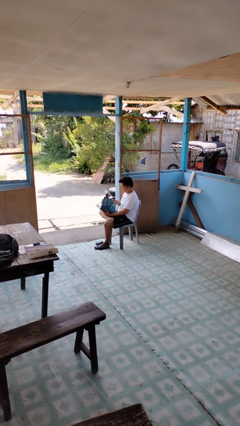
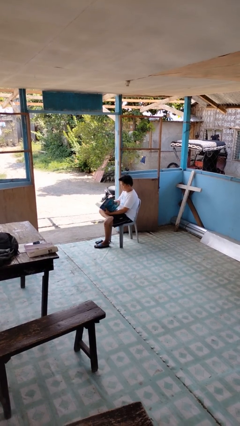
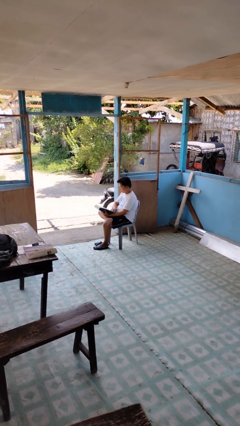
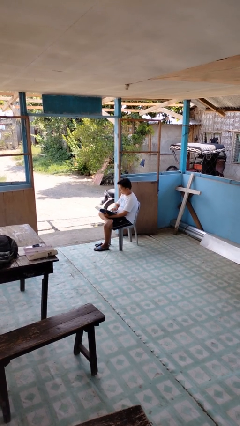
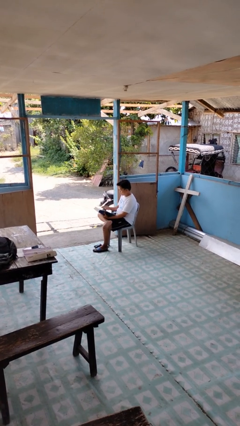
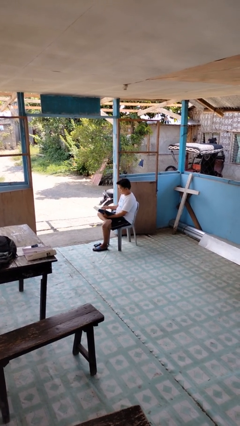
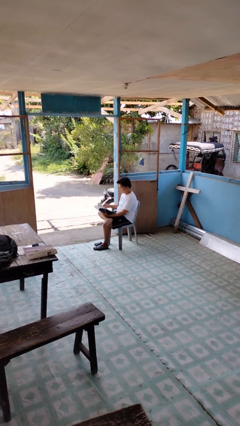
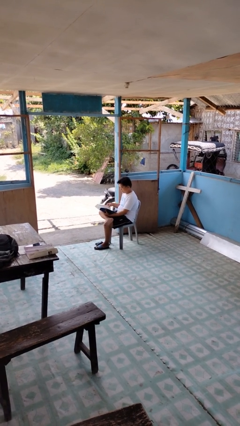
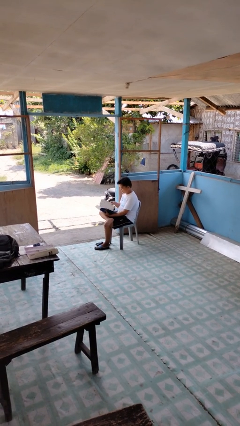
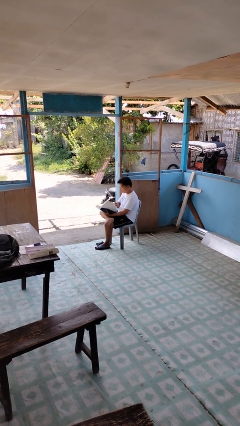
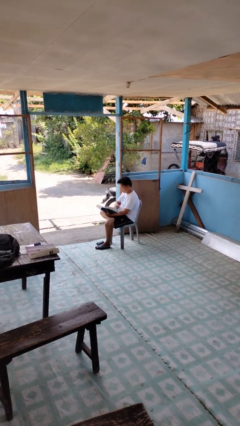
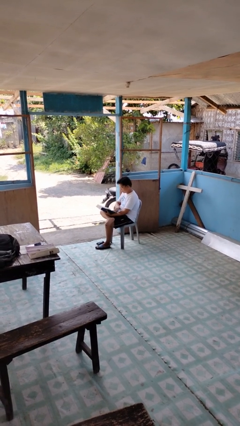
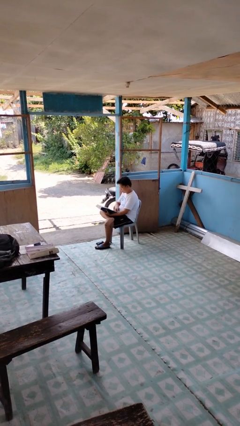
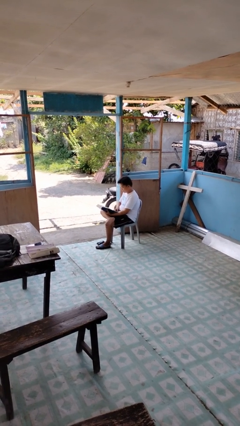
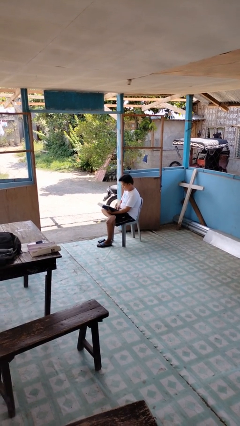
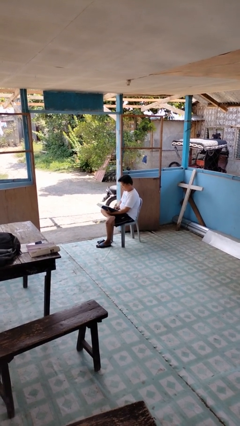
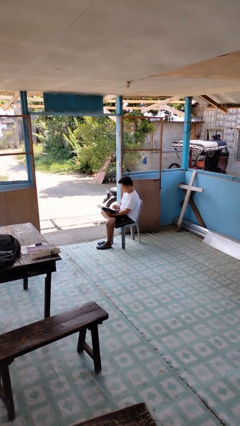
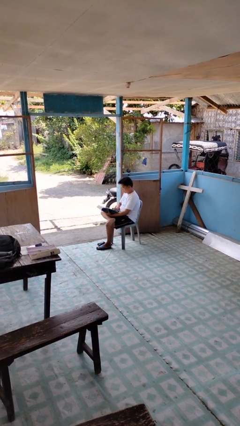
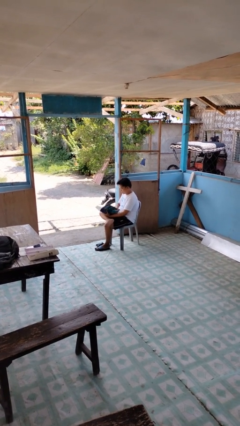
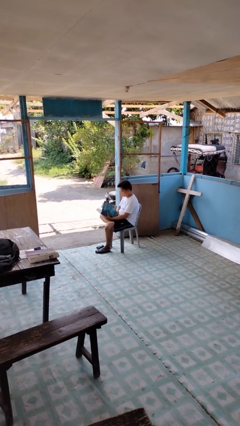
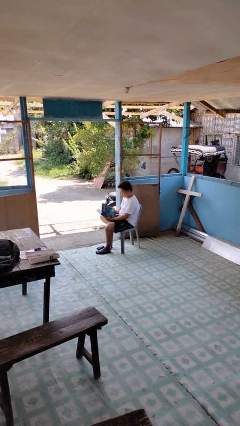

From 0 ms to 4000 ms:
person reads book

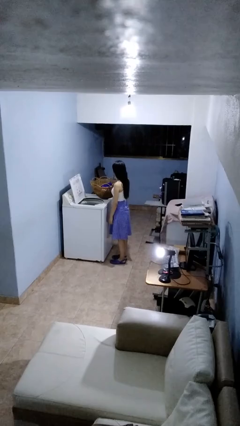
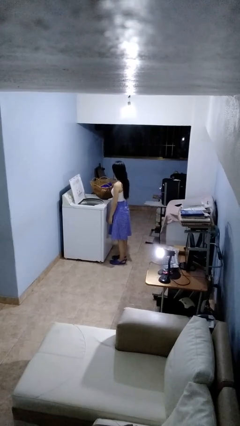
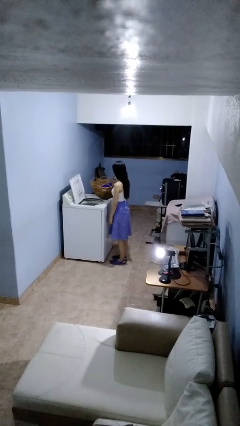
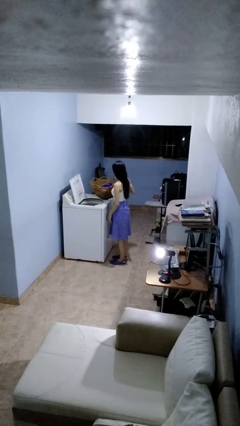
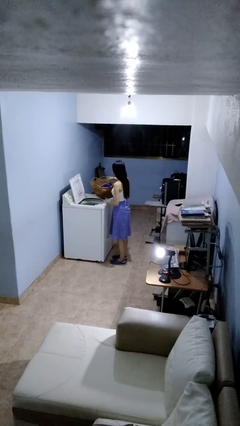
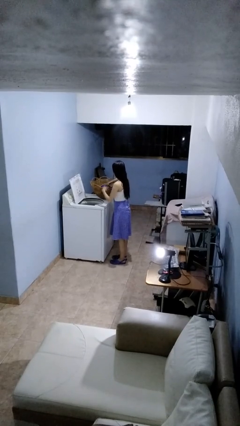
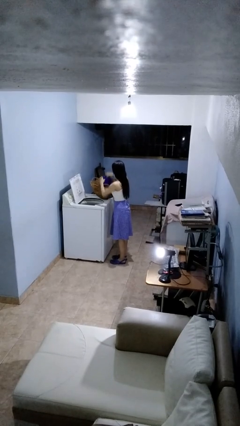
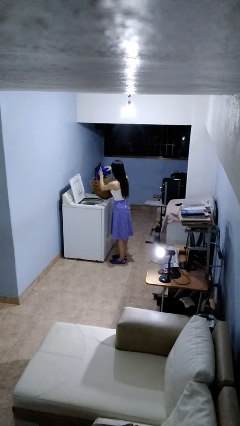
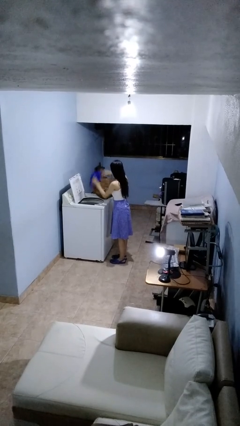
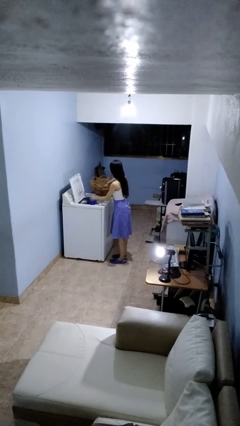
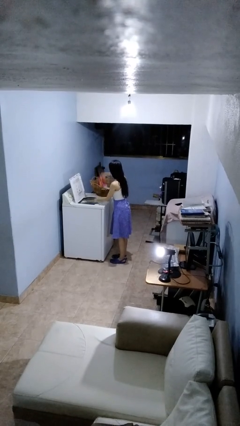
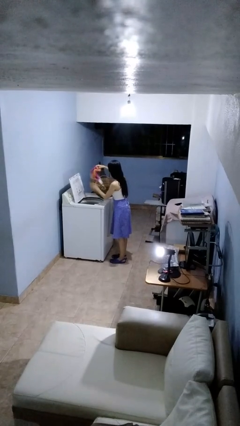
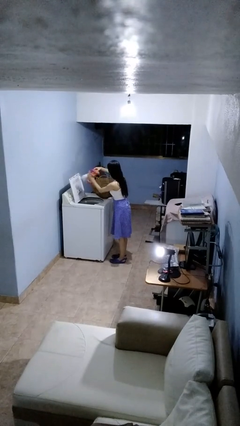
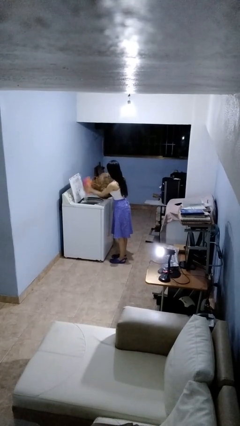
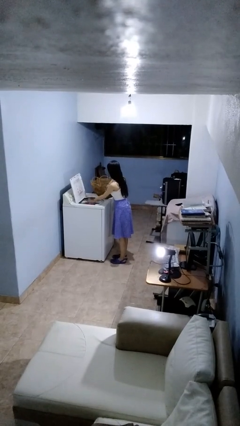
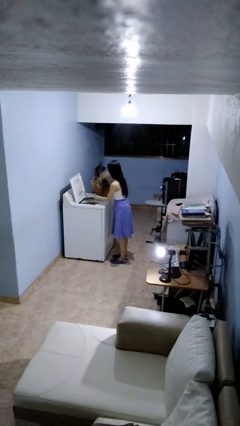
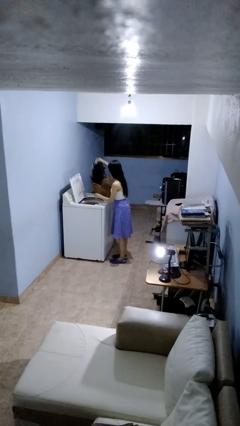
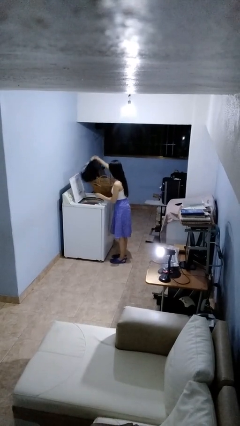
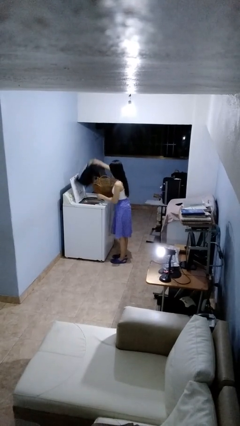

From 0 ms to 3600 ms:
person loads clotheswasher

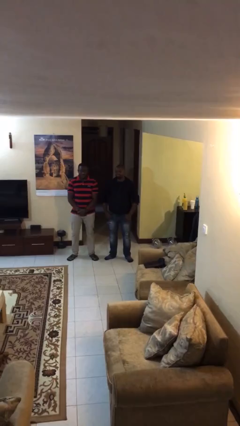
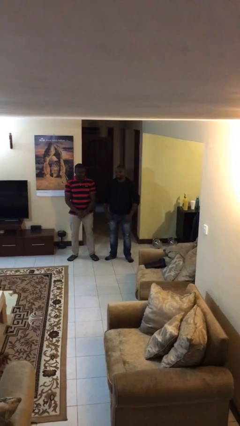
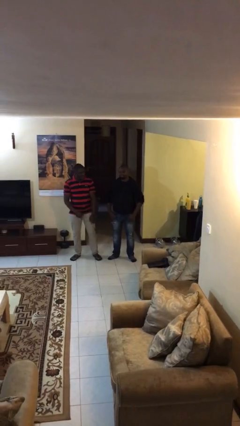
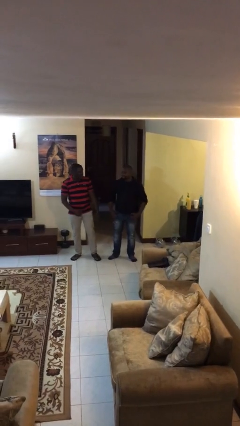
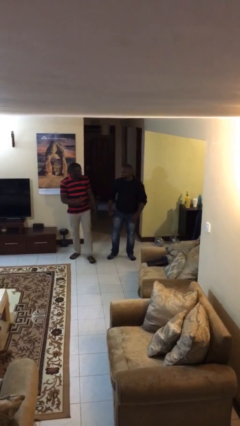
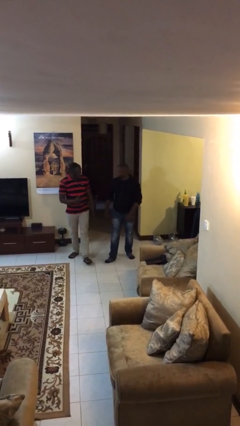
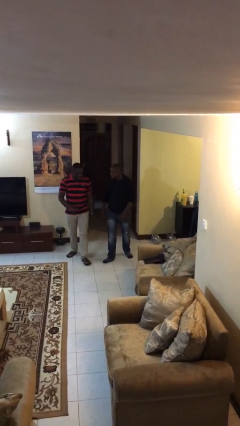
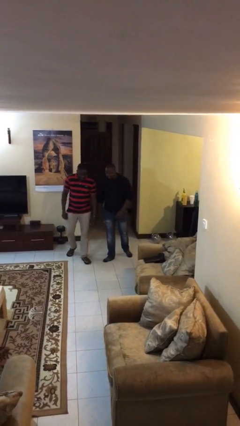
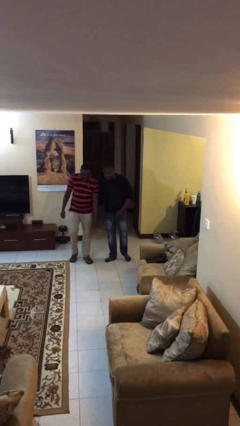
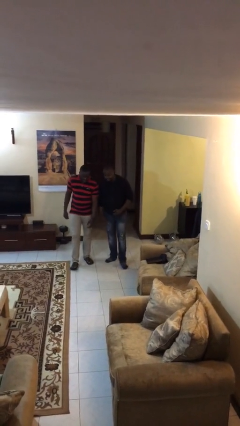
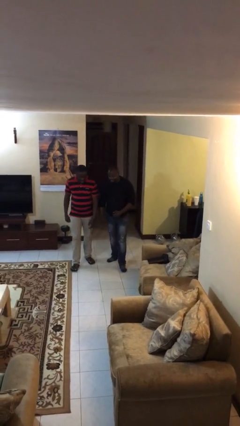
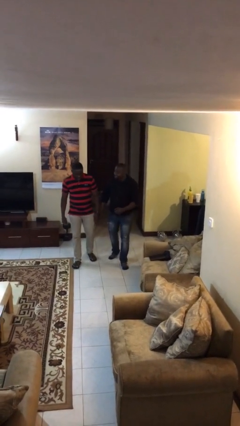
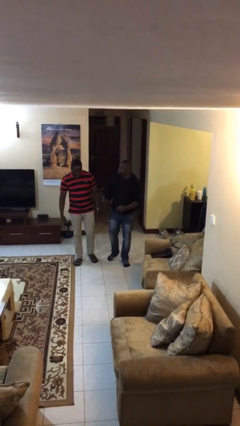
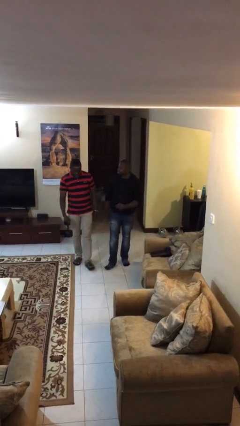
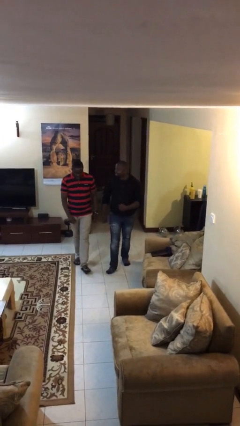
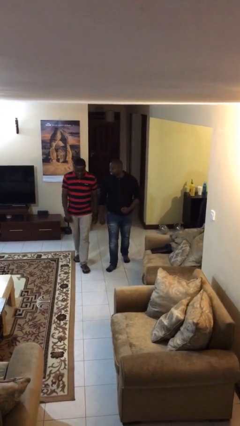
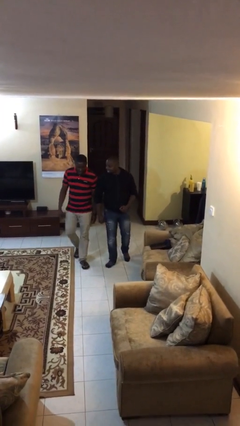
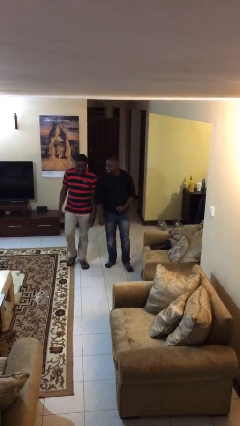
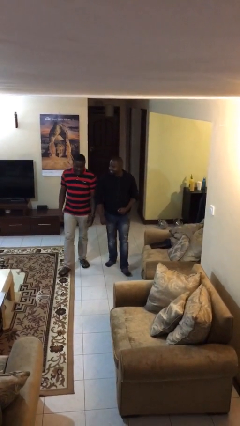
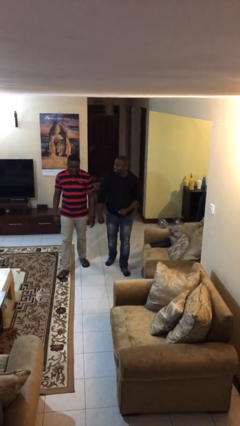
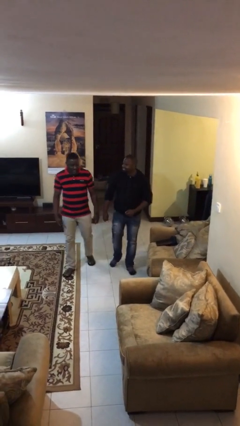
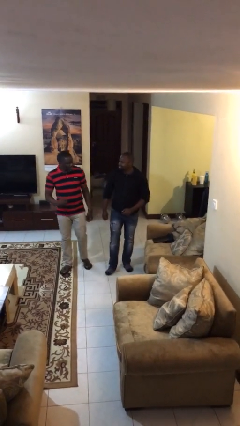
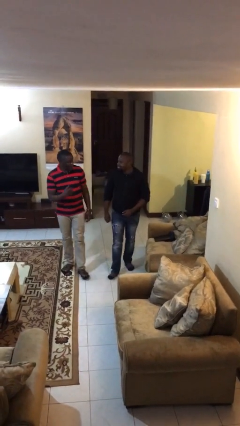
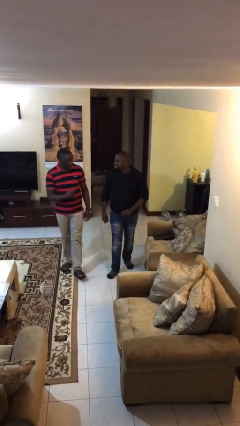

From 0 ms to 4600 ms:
person talks to person

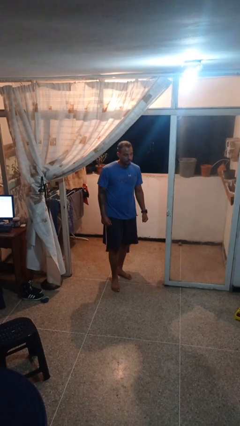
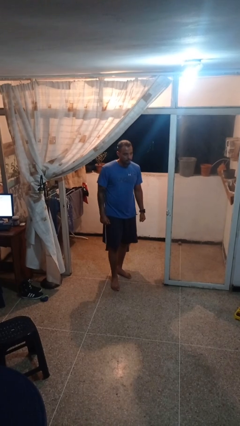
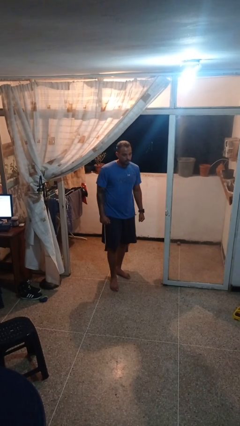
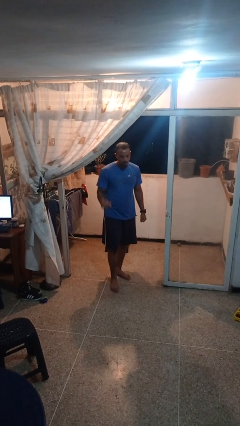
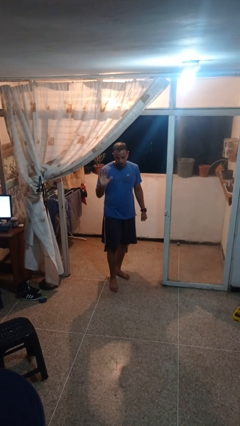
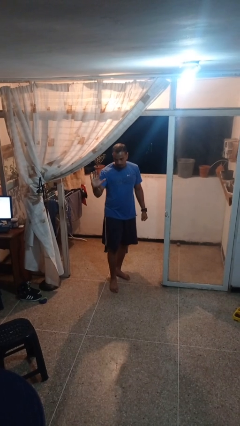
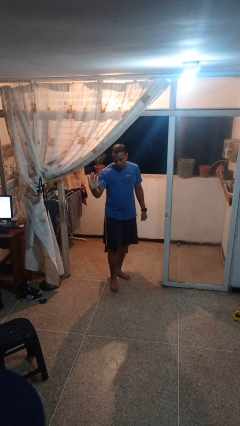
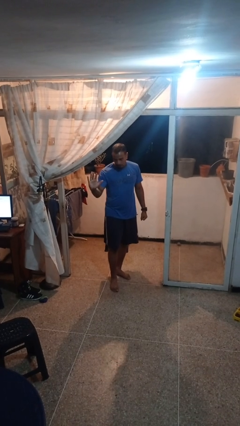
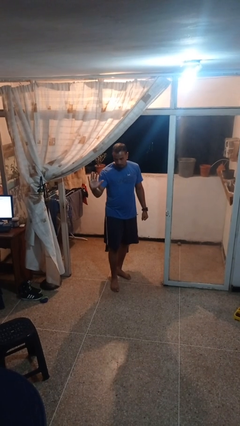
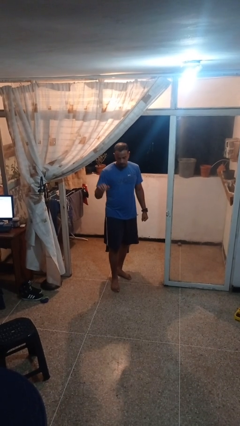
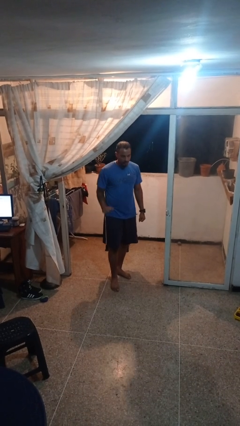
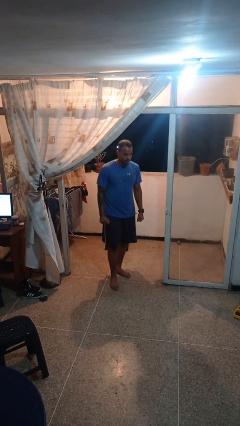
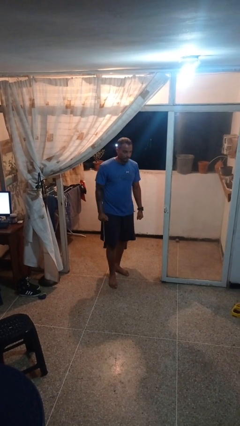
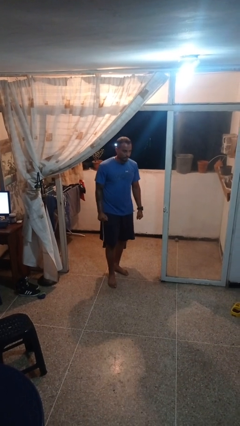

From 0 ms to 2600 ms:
person gestures number five

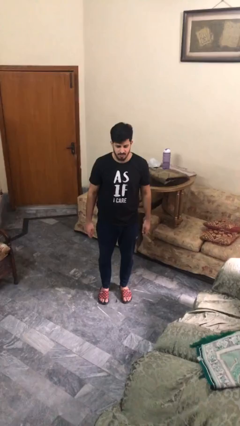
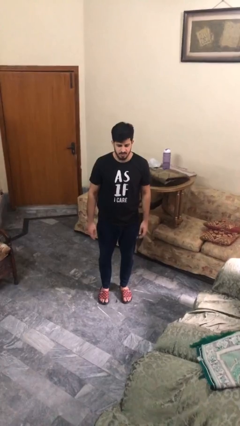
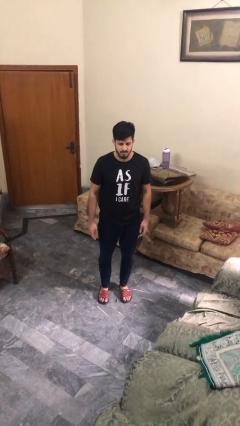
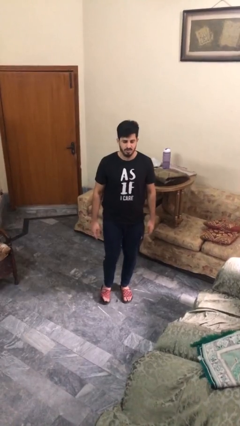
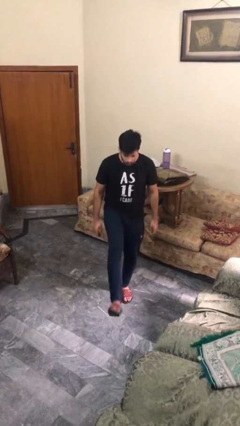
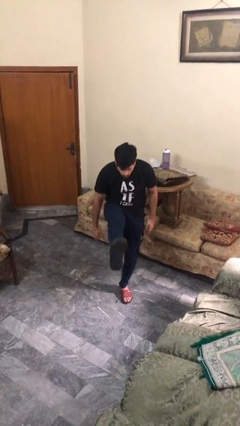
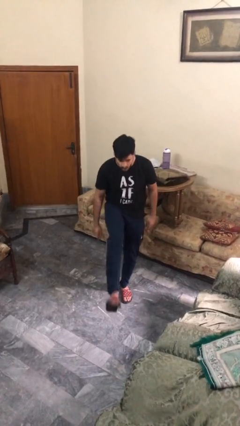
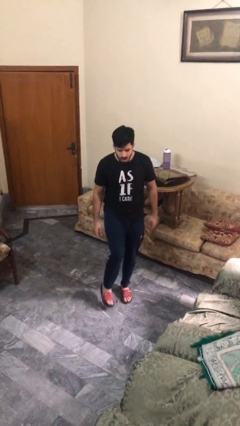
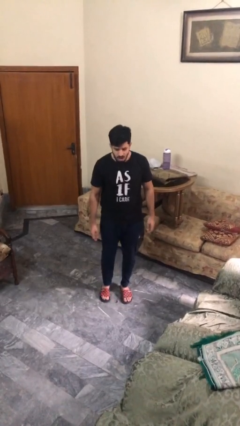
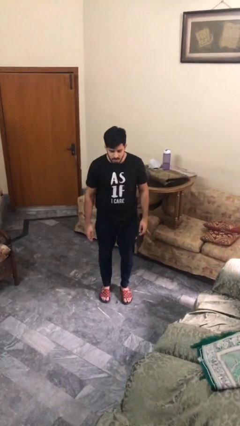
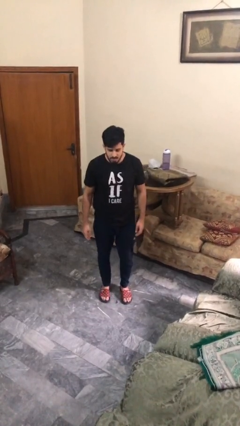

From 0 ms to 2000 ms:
person karate kicks

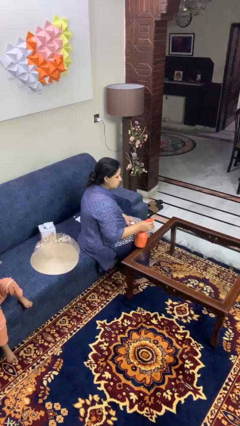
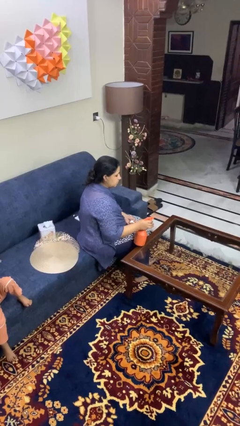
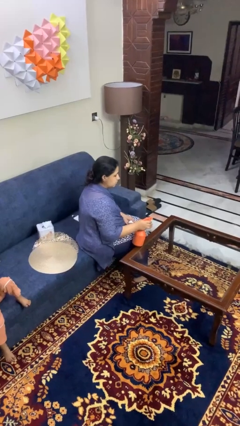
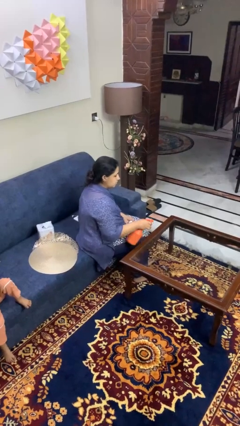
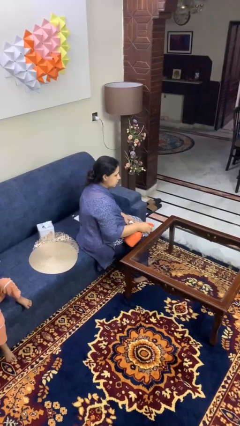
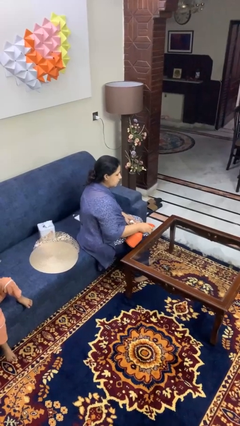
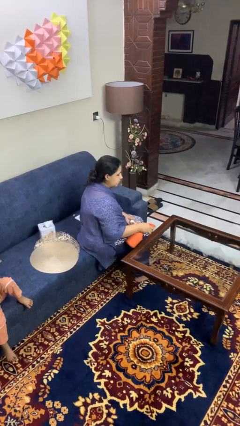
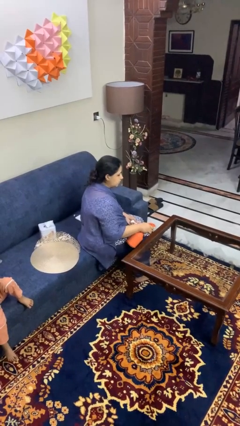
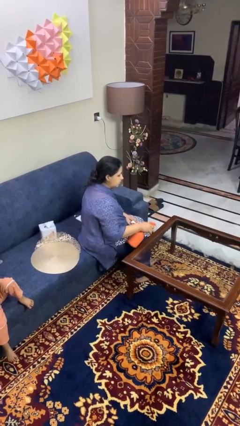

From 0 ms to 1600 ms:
person sprays from bottle
